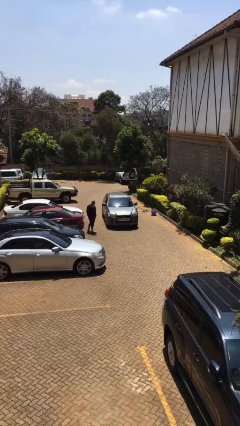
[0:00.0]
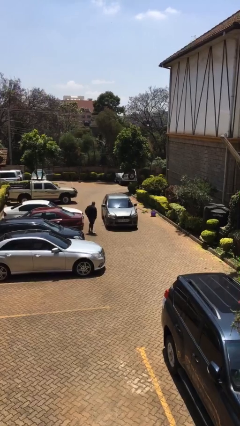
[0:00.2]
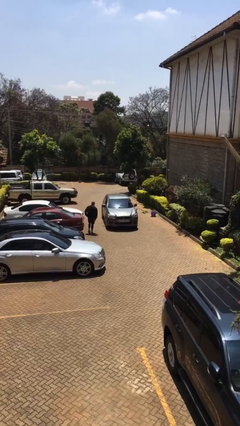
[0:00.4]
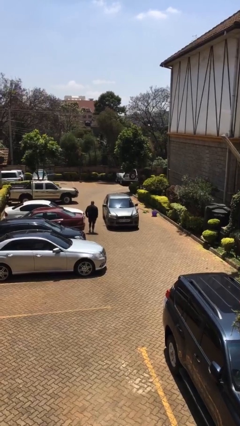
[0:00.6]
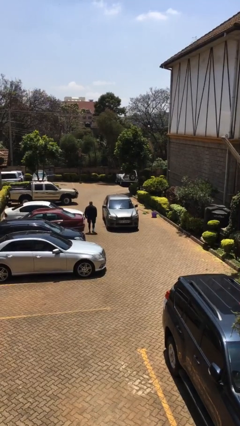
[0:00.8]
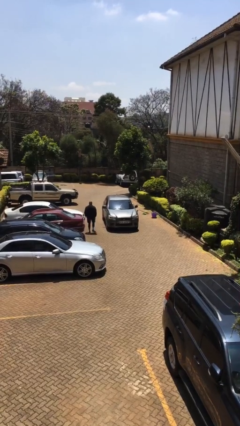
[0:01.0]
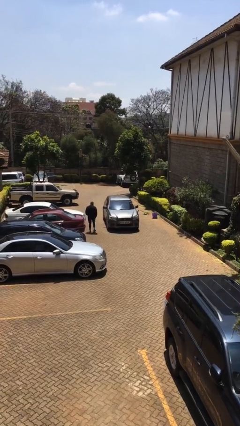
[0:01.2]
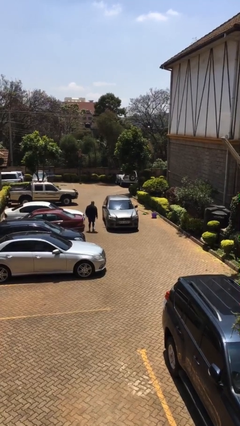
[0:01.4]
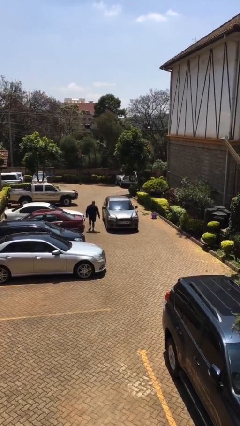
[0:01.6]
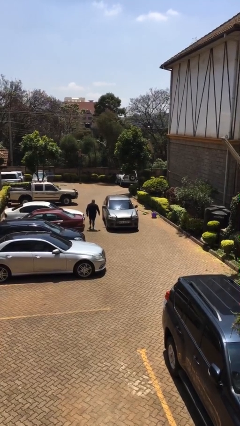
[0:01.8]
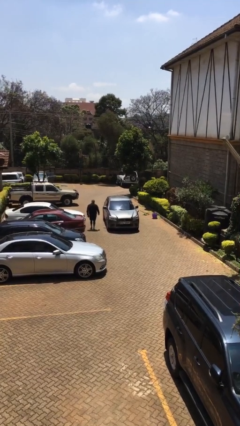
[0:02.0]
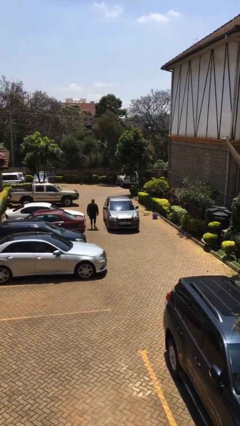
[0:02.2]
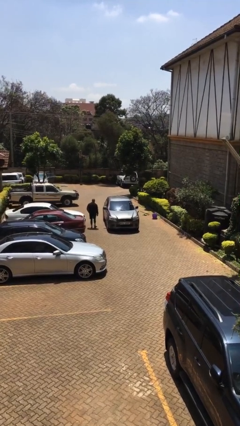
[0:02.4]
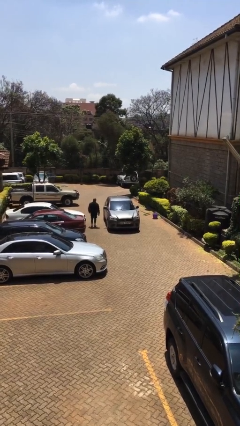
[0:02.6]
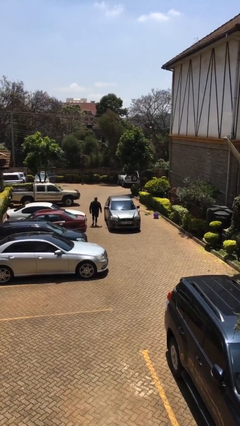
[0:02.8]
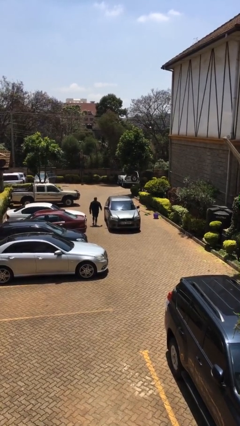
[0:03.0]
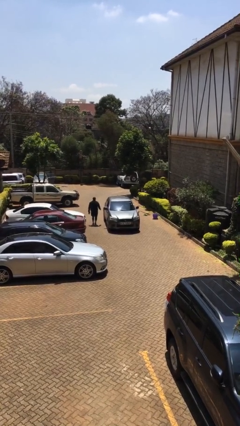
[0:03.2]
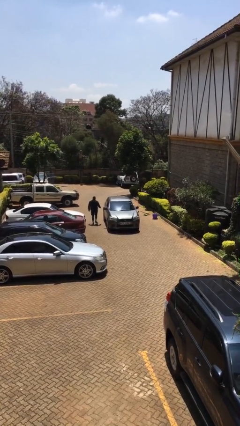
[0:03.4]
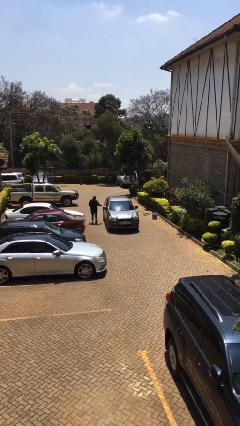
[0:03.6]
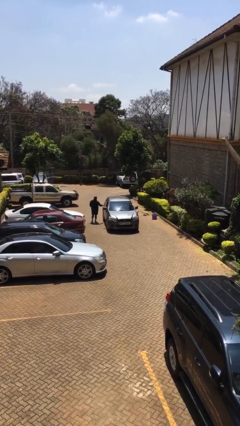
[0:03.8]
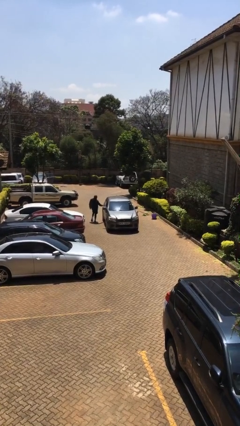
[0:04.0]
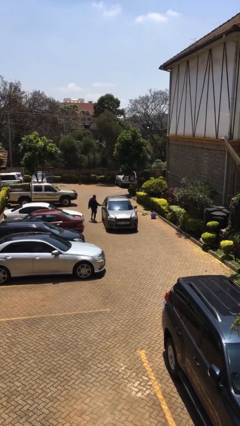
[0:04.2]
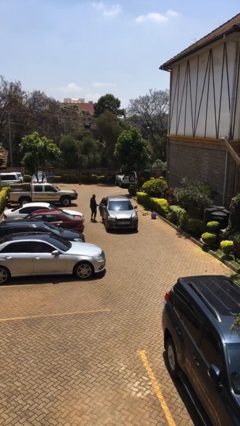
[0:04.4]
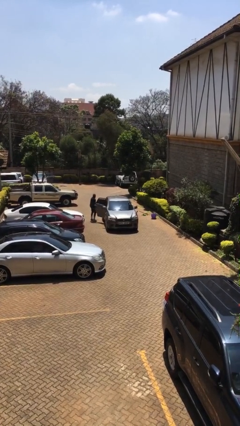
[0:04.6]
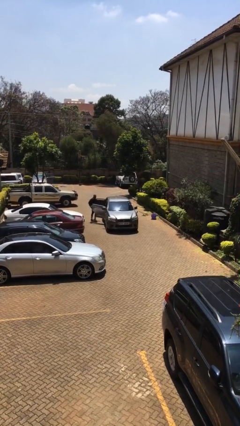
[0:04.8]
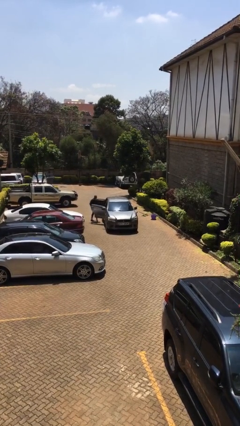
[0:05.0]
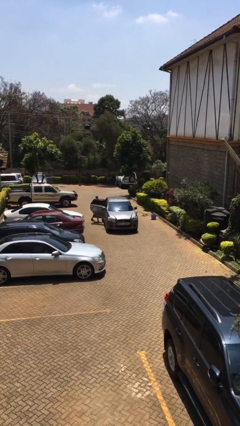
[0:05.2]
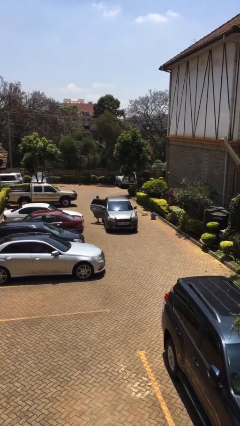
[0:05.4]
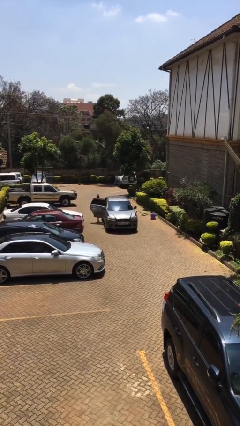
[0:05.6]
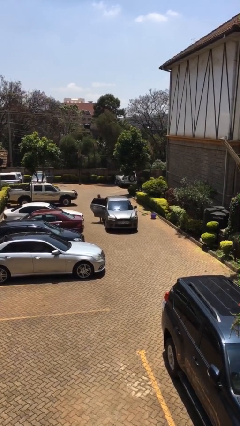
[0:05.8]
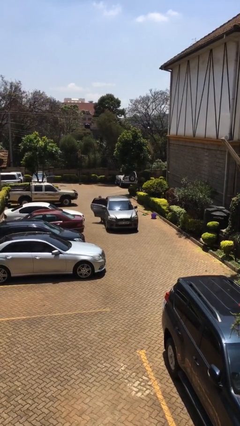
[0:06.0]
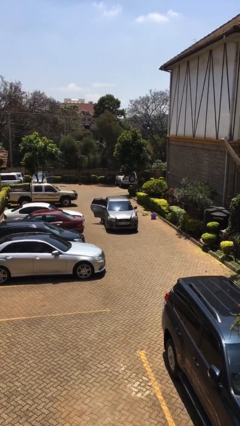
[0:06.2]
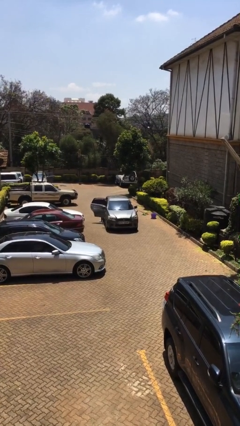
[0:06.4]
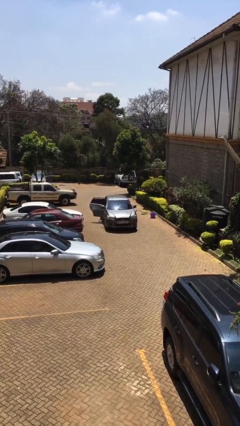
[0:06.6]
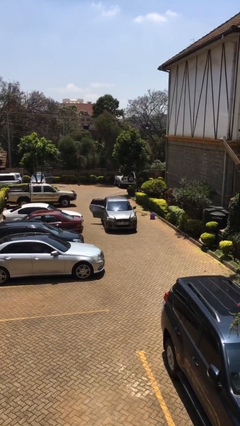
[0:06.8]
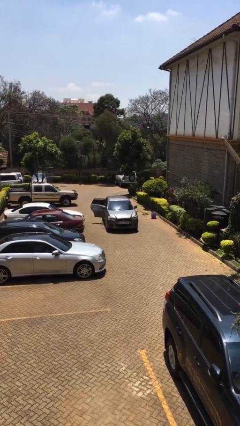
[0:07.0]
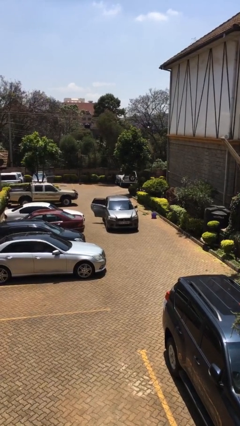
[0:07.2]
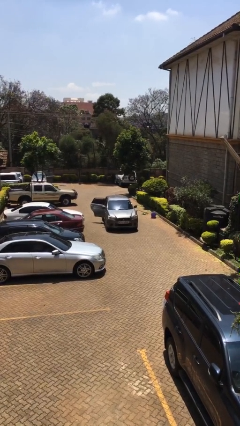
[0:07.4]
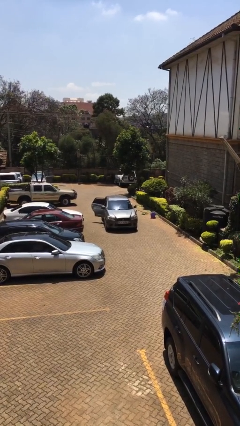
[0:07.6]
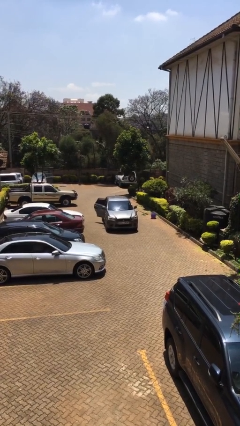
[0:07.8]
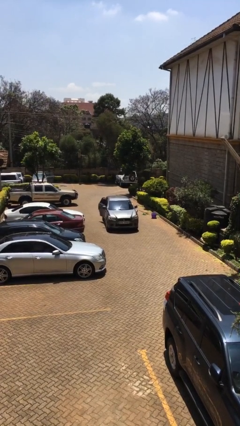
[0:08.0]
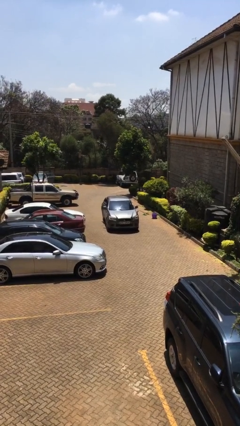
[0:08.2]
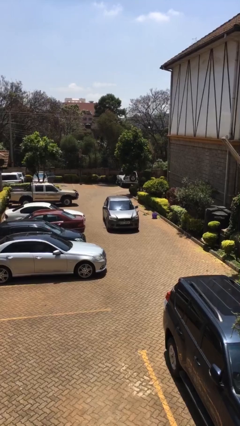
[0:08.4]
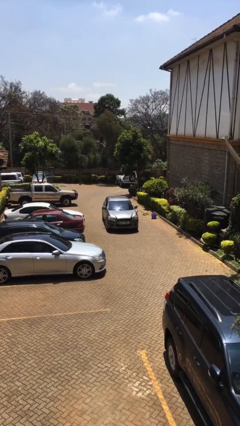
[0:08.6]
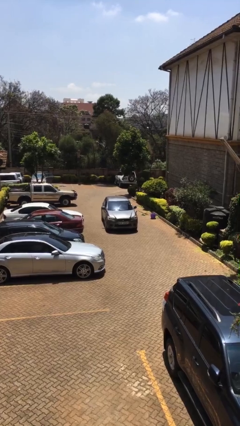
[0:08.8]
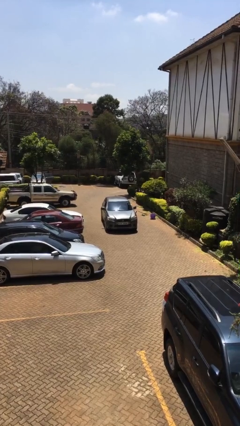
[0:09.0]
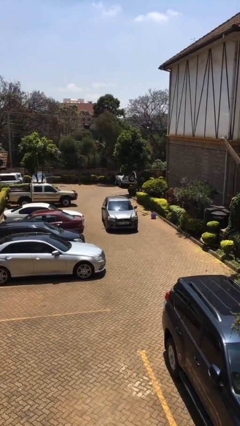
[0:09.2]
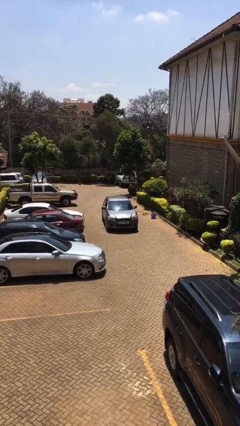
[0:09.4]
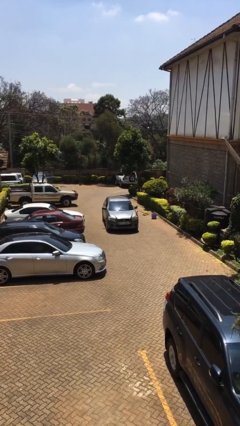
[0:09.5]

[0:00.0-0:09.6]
car picks up person

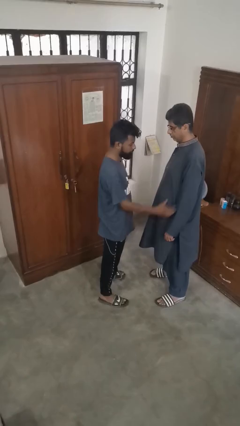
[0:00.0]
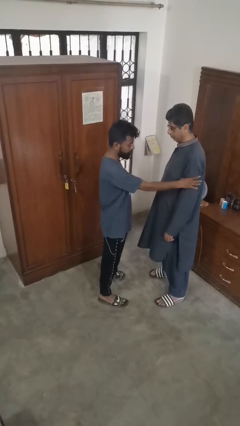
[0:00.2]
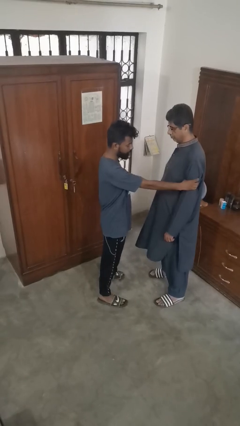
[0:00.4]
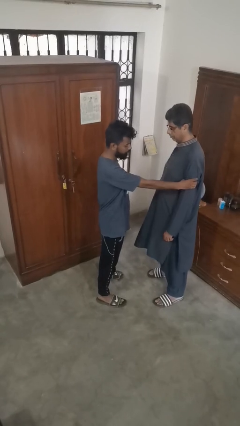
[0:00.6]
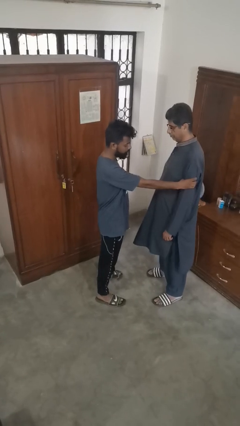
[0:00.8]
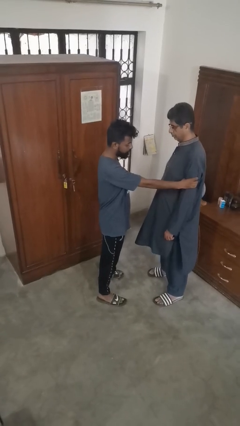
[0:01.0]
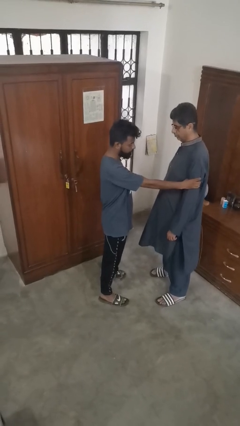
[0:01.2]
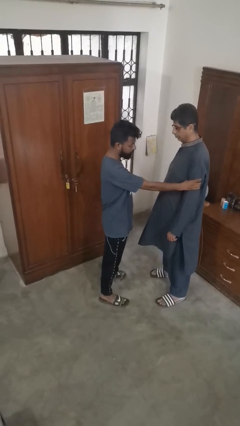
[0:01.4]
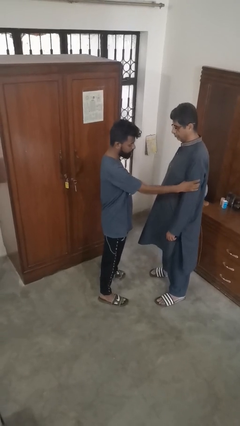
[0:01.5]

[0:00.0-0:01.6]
person grabs person by bicep

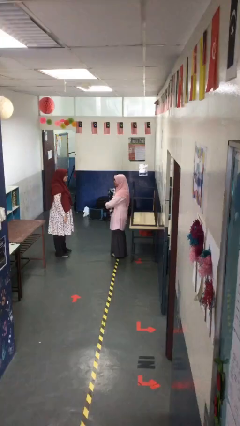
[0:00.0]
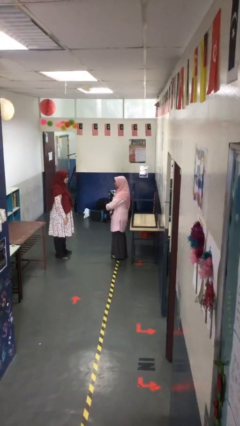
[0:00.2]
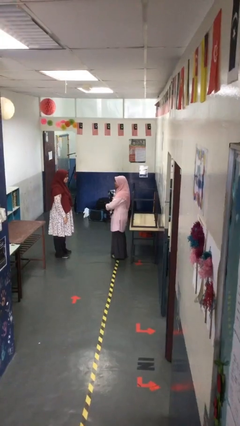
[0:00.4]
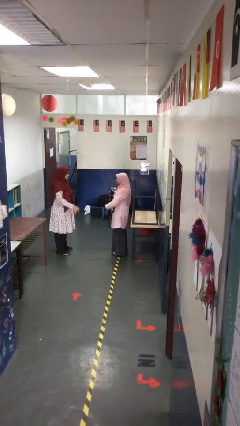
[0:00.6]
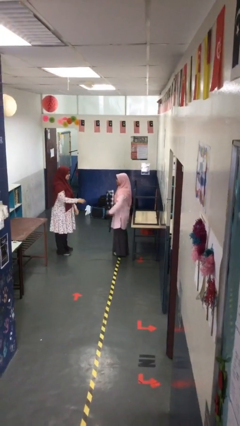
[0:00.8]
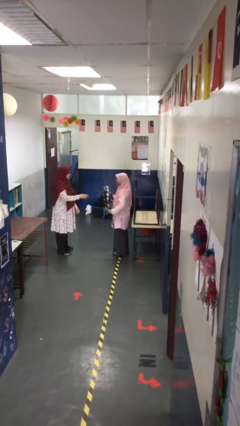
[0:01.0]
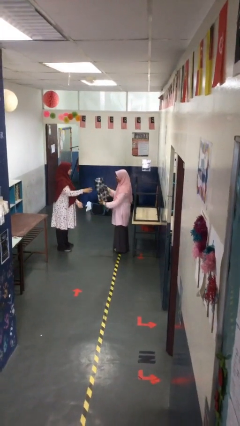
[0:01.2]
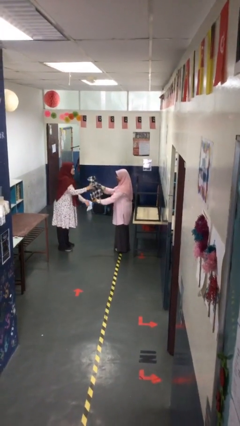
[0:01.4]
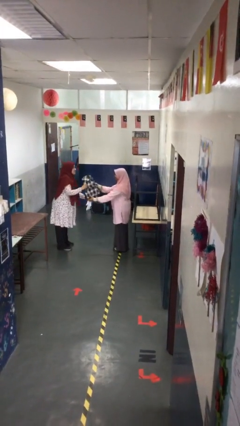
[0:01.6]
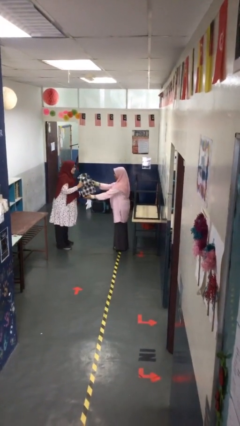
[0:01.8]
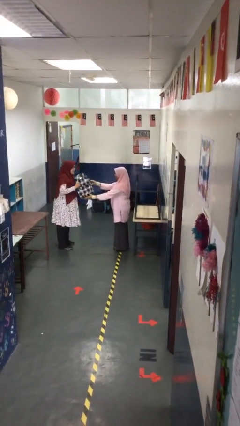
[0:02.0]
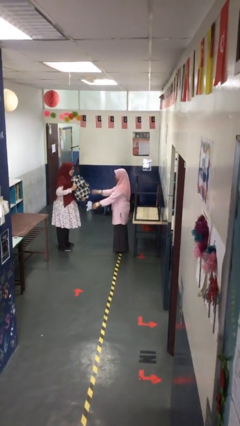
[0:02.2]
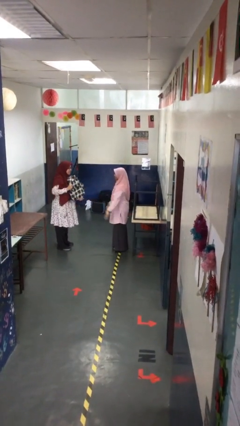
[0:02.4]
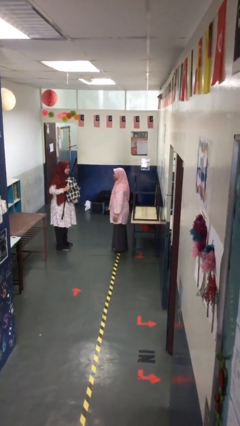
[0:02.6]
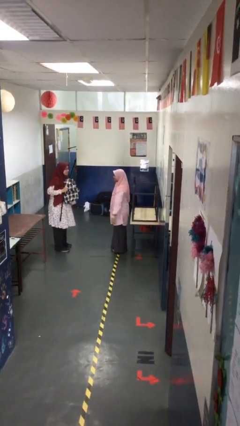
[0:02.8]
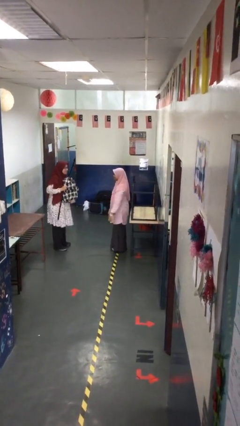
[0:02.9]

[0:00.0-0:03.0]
person transfers object to person

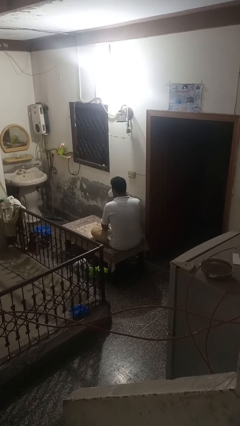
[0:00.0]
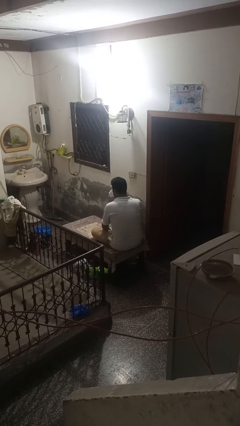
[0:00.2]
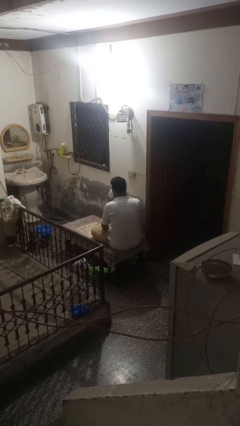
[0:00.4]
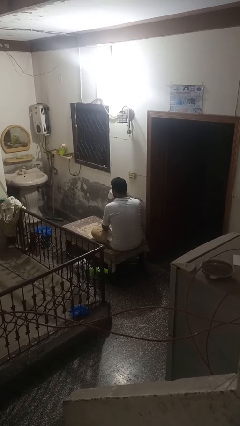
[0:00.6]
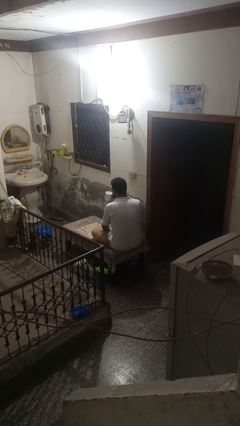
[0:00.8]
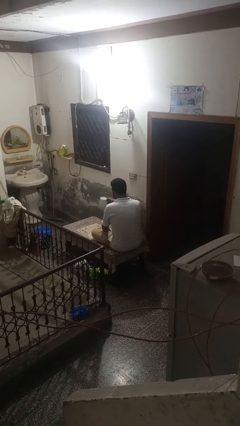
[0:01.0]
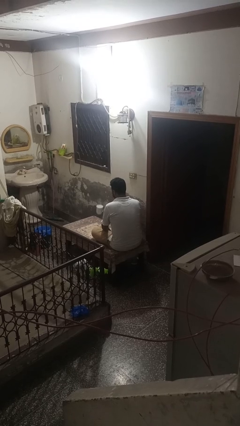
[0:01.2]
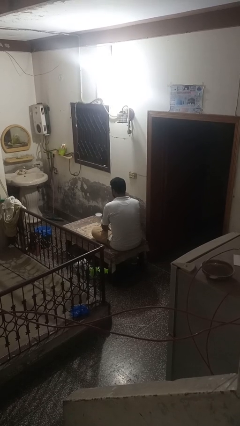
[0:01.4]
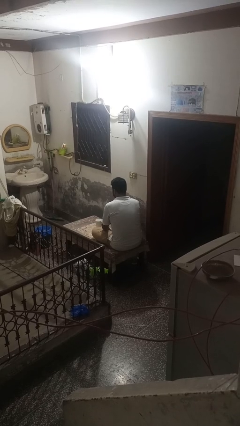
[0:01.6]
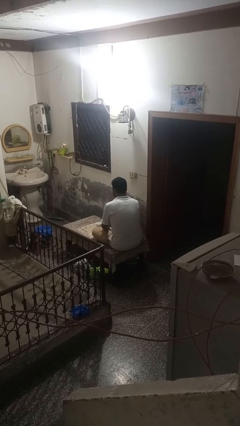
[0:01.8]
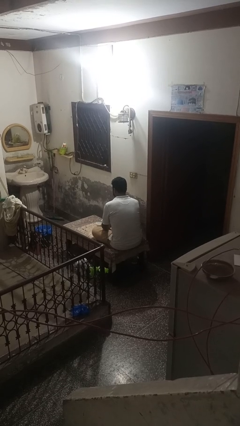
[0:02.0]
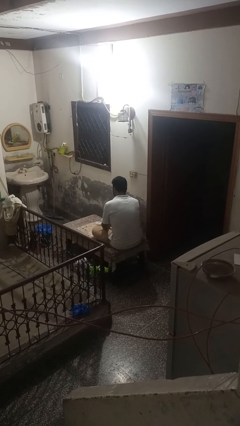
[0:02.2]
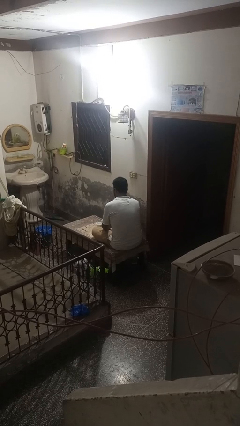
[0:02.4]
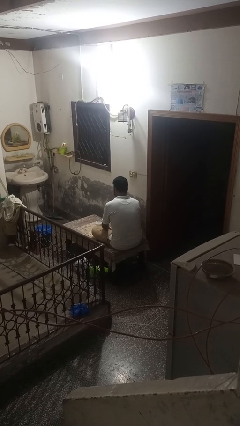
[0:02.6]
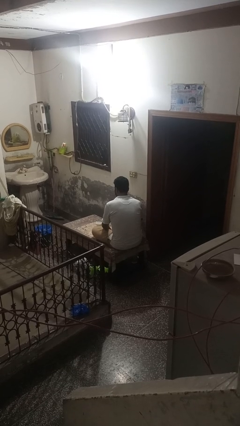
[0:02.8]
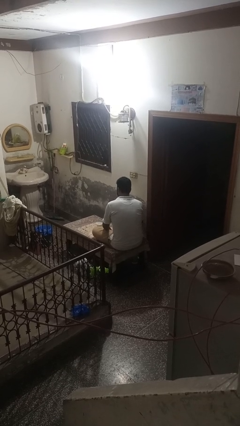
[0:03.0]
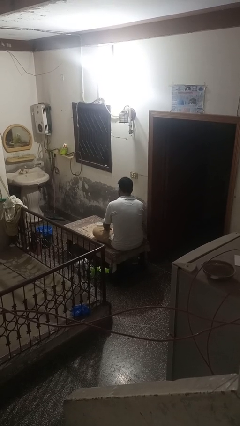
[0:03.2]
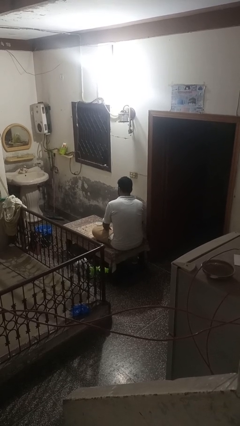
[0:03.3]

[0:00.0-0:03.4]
person puts down object on table
